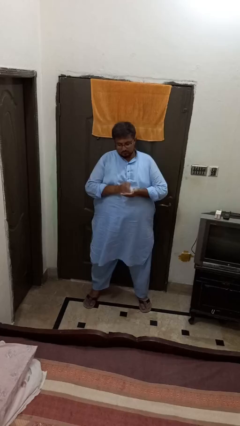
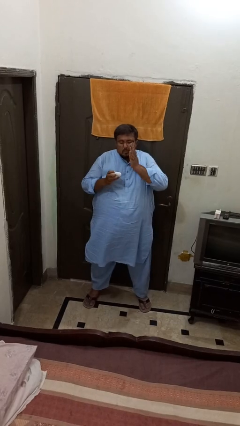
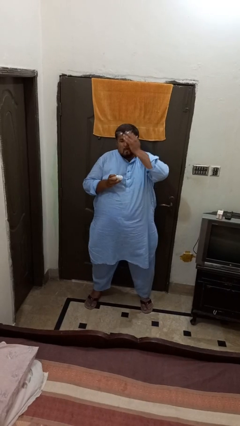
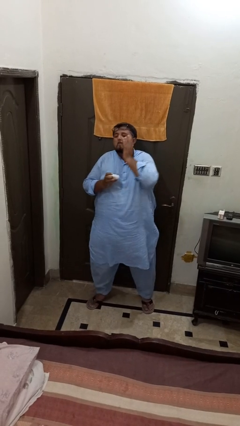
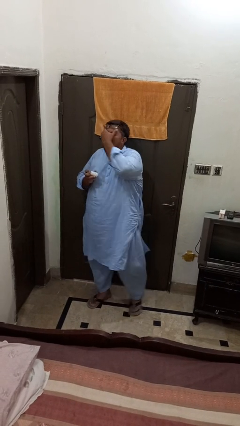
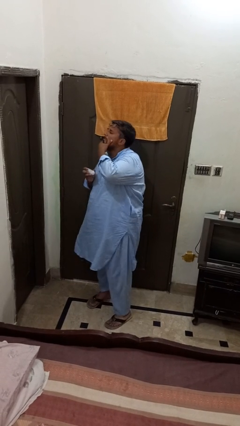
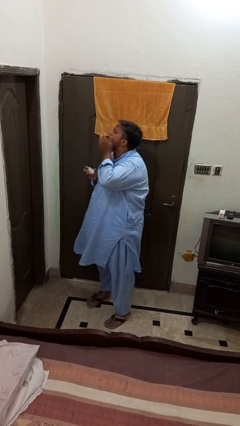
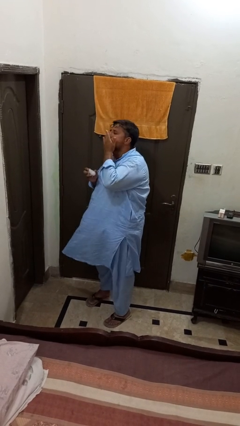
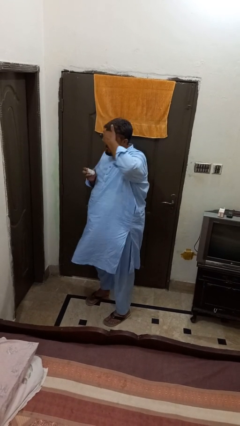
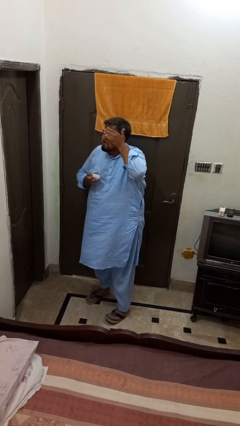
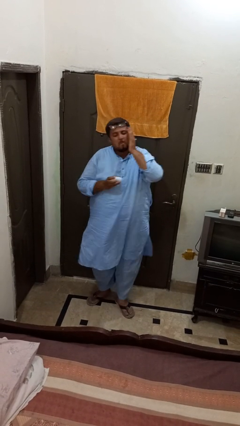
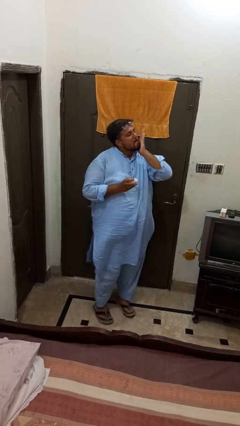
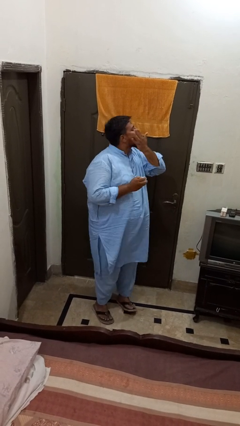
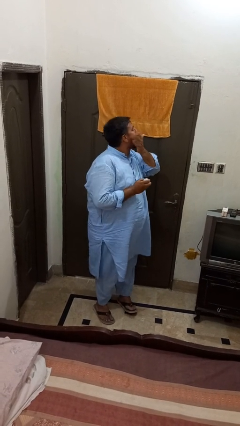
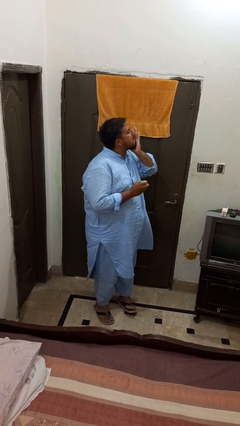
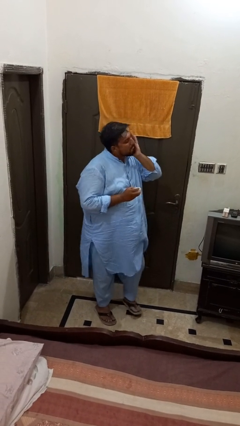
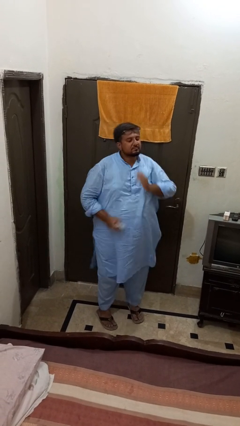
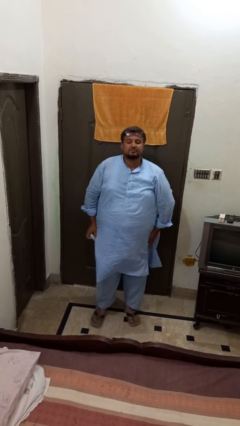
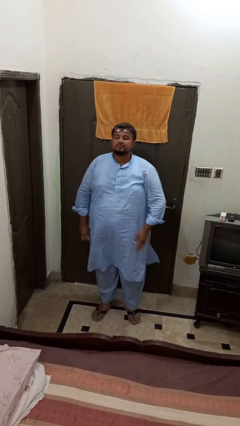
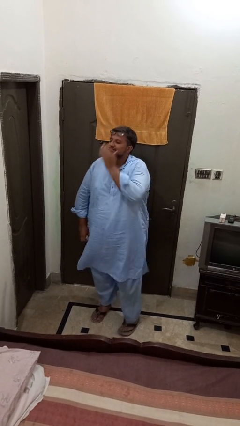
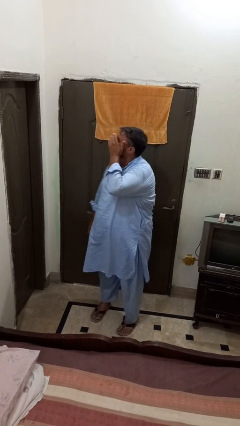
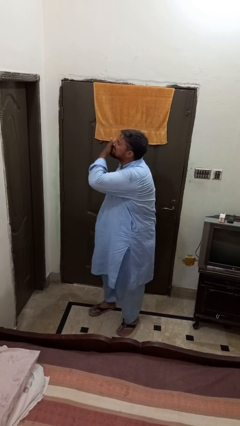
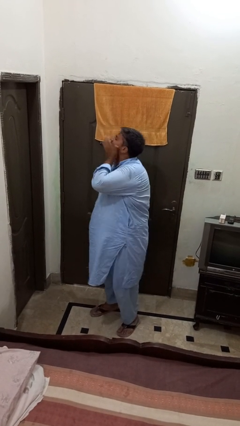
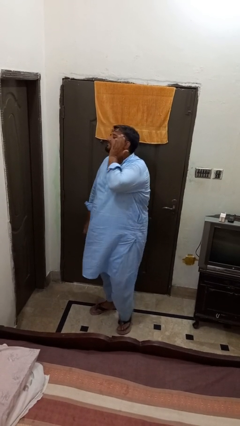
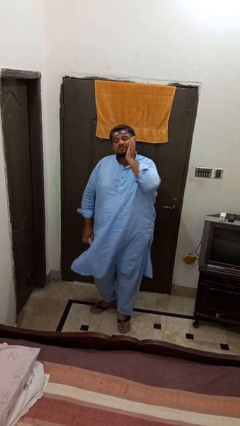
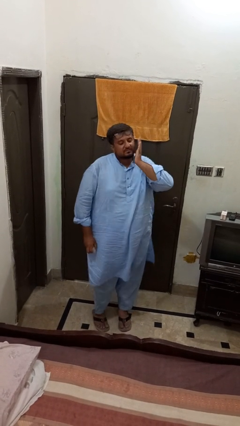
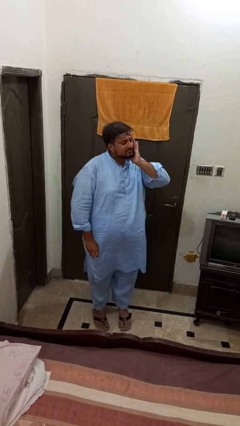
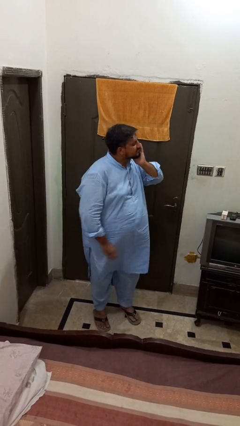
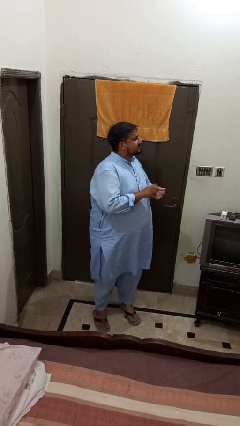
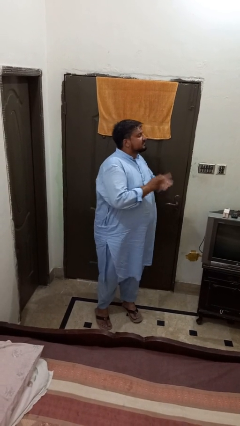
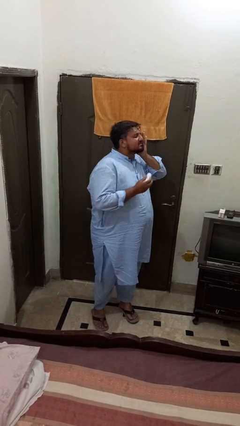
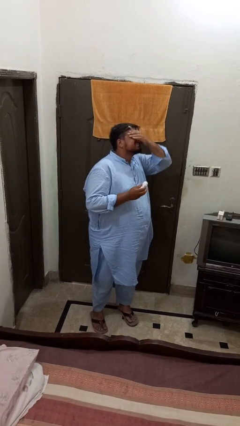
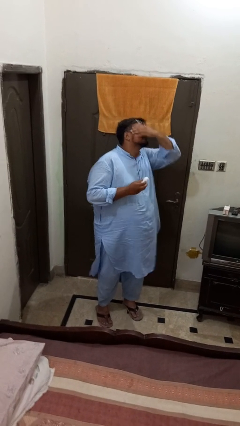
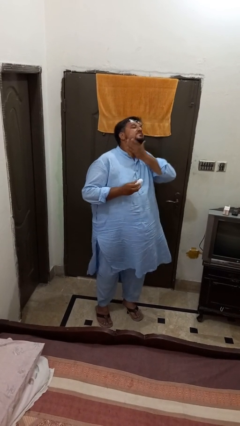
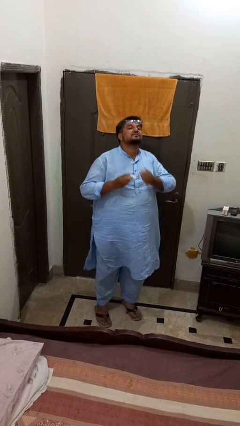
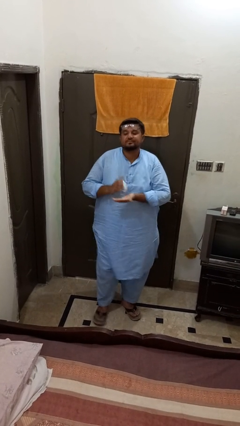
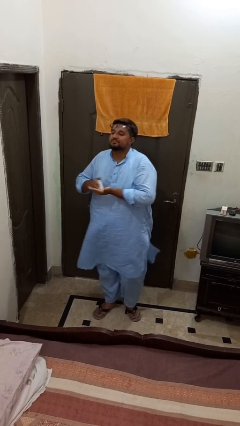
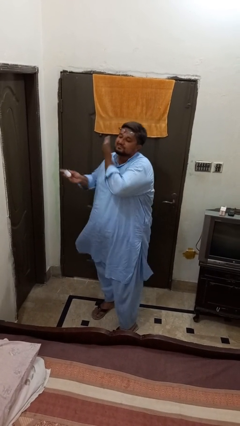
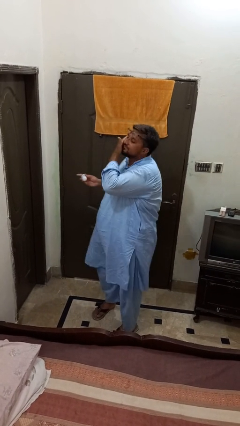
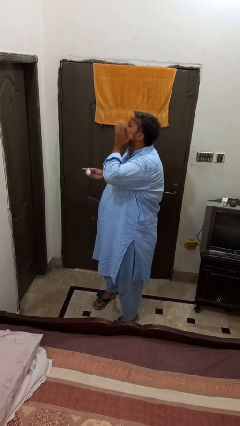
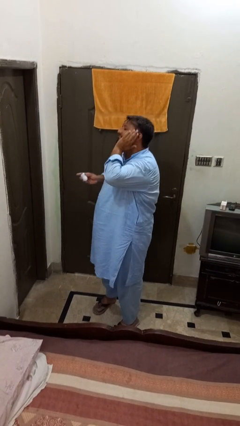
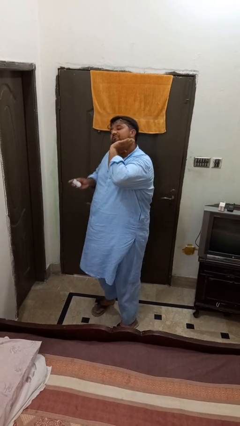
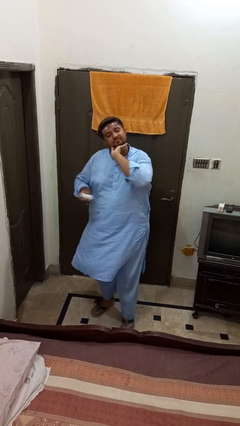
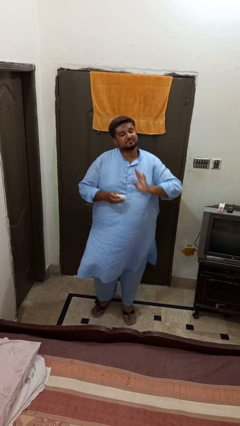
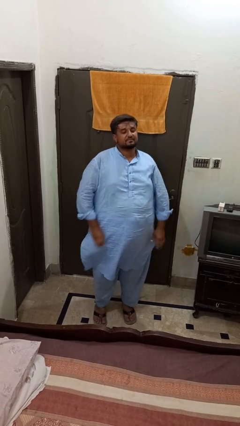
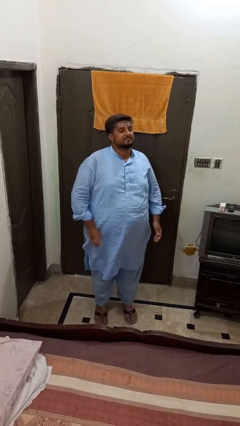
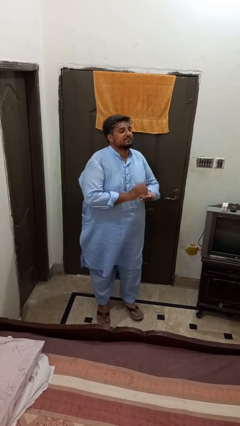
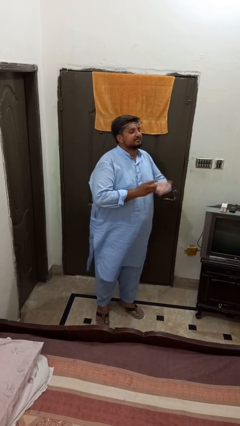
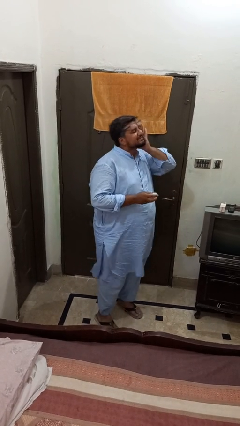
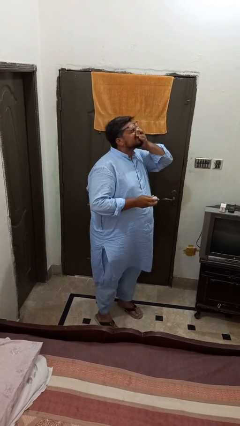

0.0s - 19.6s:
person applies facial moisturizer

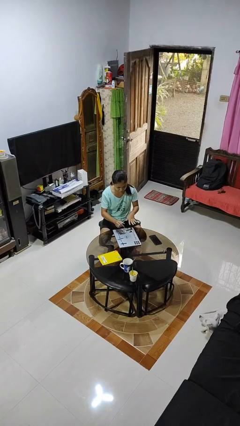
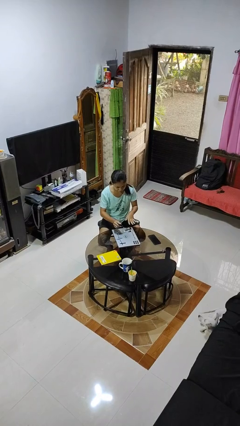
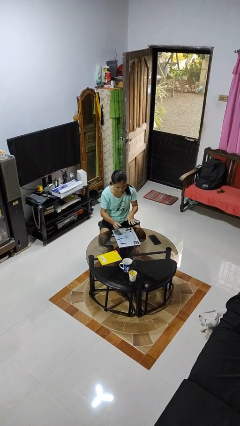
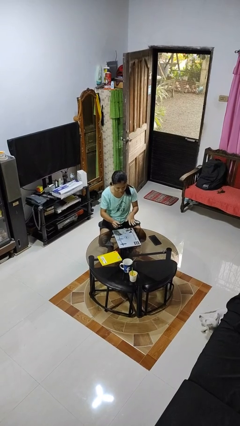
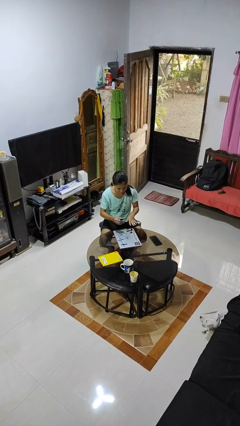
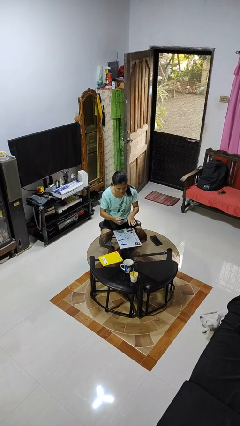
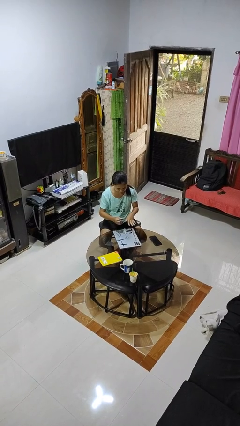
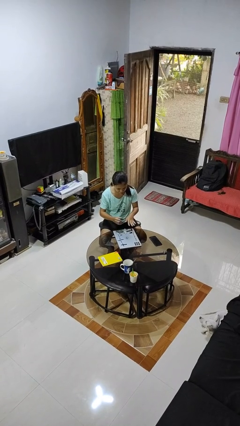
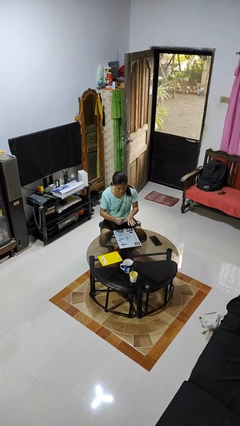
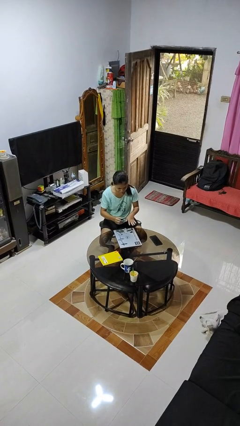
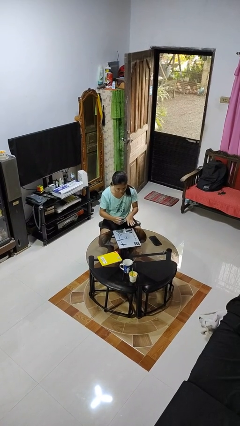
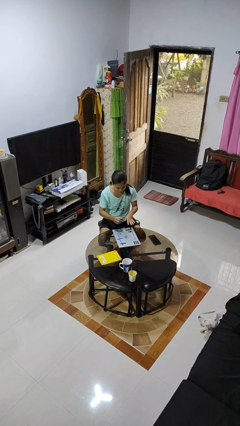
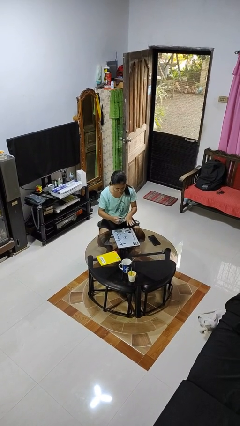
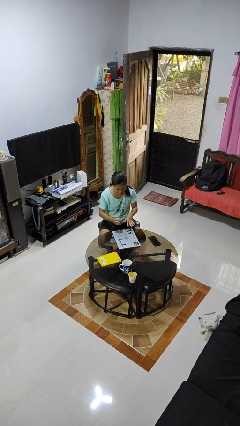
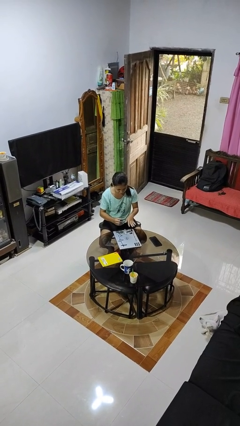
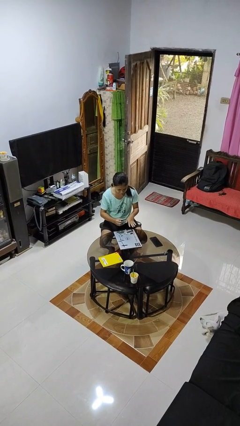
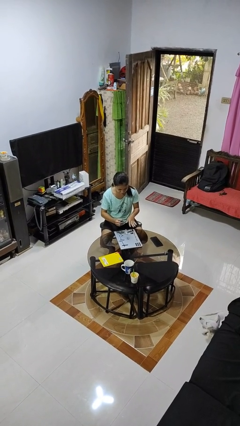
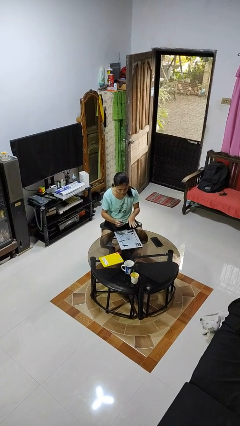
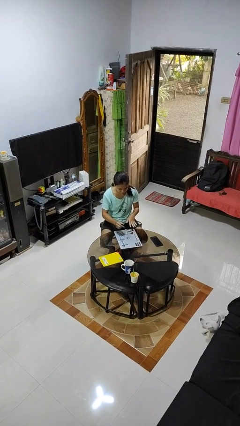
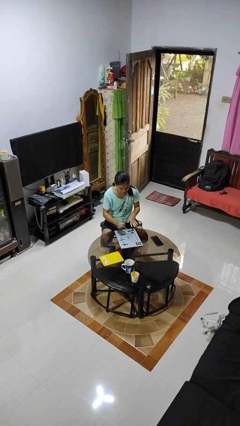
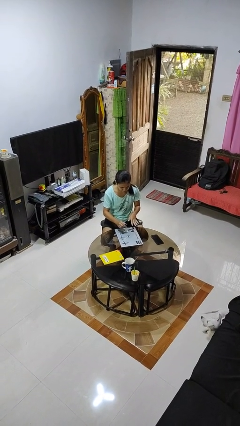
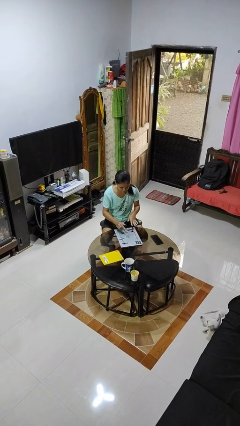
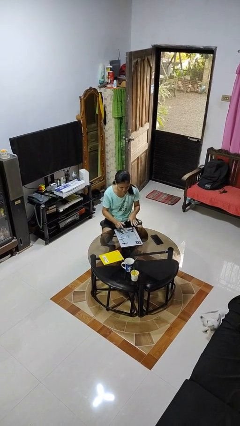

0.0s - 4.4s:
person paints fingernails

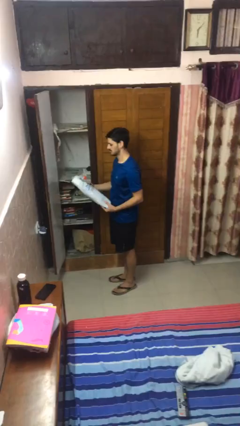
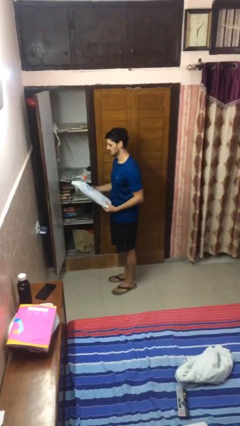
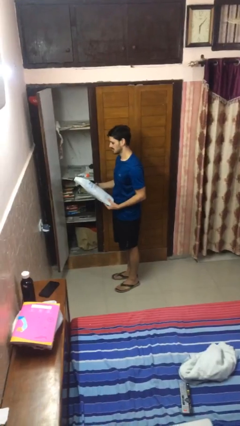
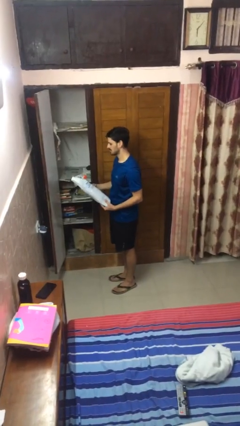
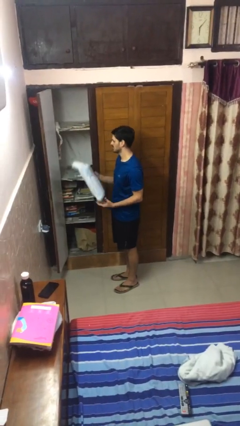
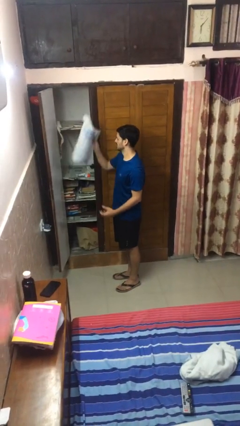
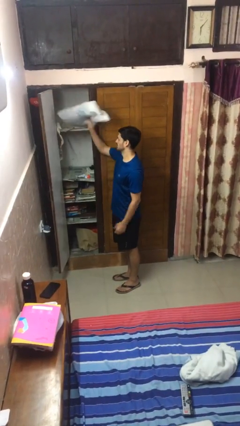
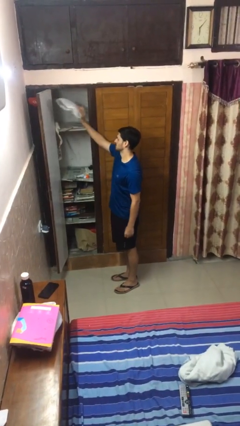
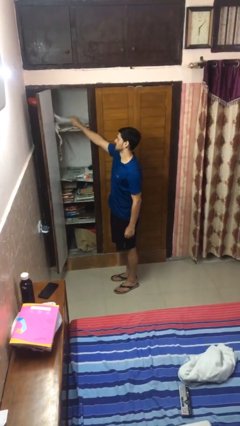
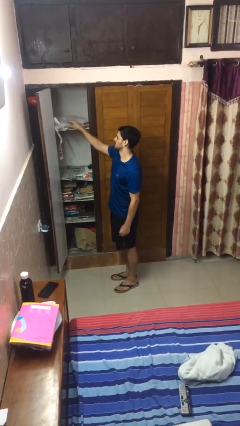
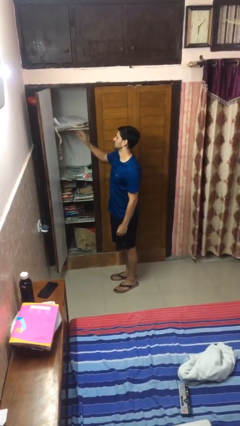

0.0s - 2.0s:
person puts down object on shelf

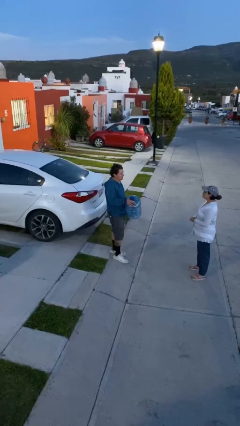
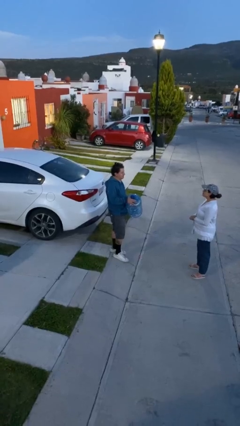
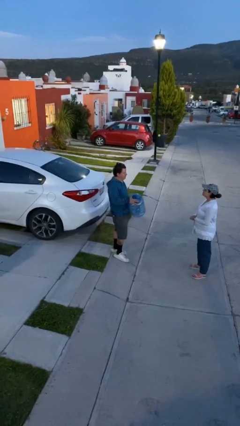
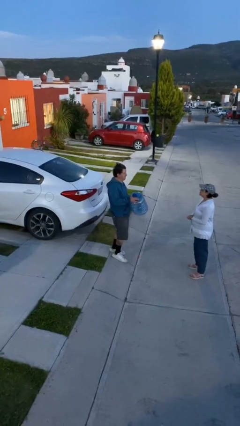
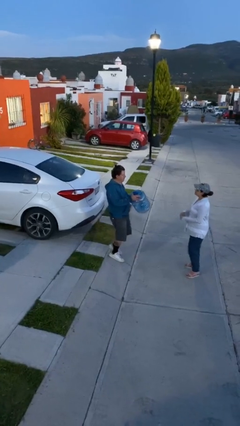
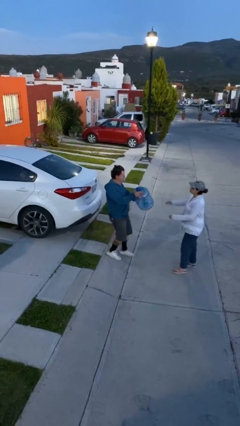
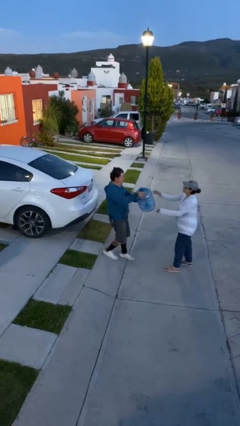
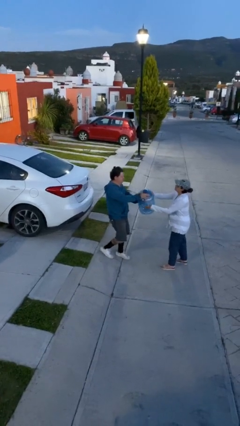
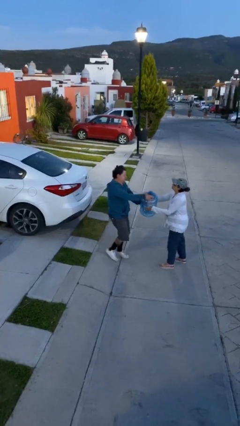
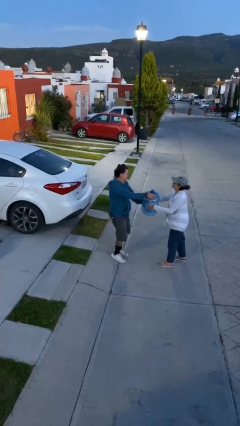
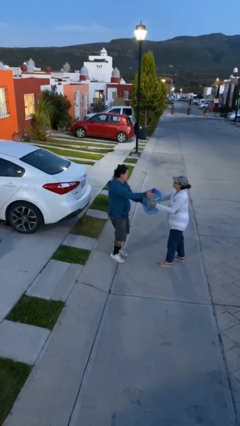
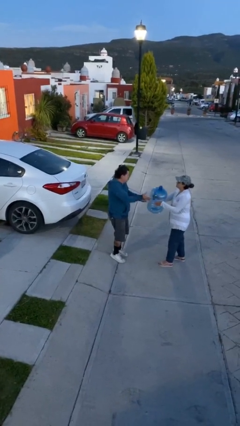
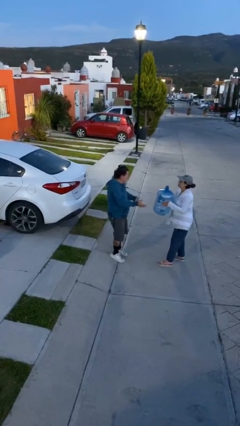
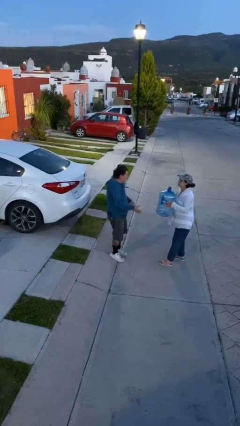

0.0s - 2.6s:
person transfers object to person
